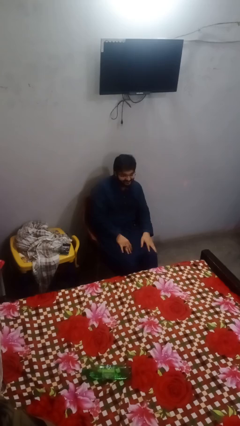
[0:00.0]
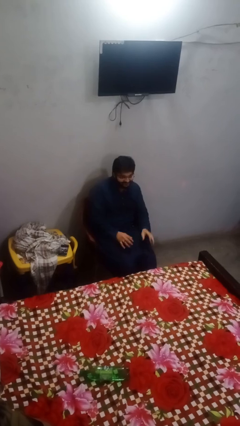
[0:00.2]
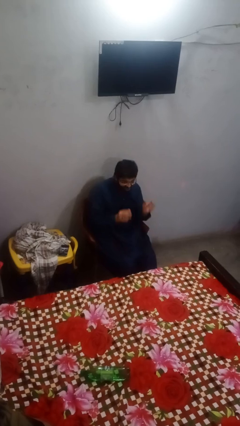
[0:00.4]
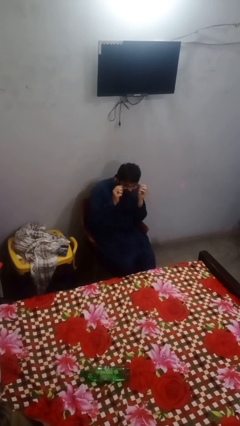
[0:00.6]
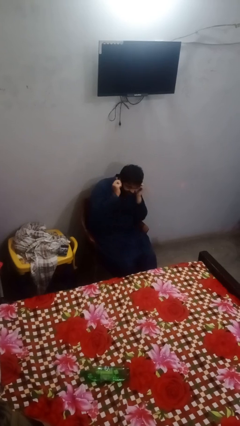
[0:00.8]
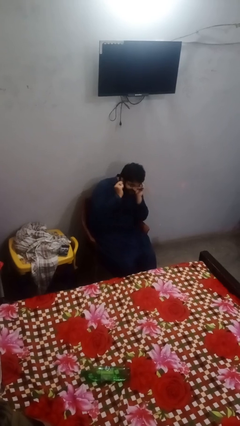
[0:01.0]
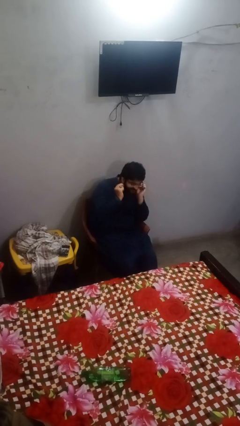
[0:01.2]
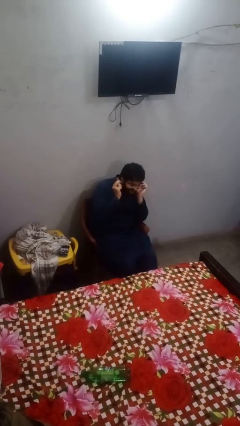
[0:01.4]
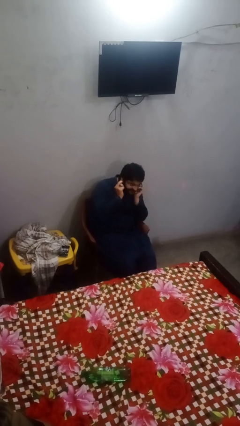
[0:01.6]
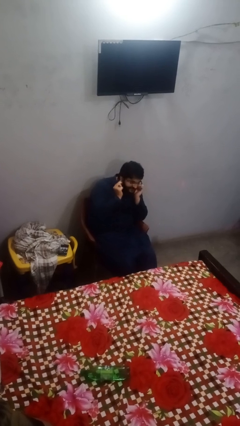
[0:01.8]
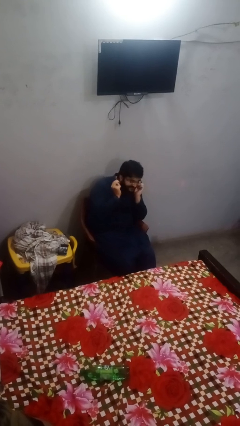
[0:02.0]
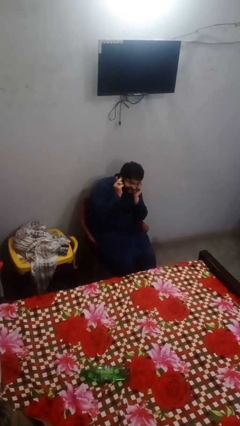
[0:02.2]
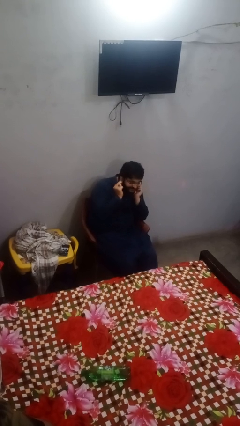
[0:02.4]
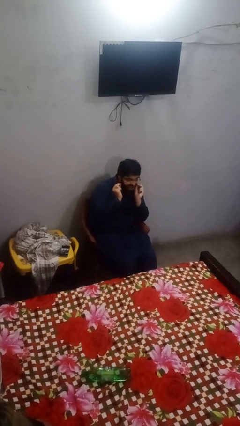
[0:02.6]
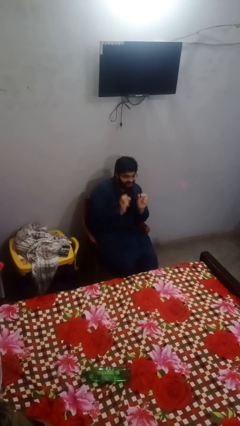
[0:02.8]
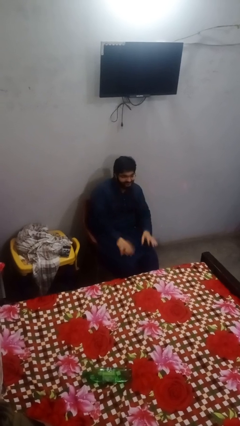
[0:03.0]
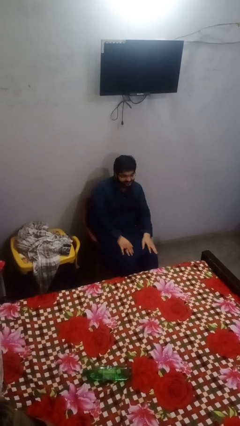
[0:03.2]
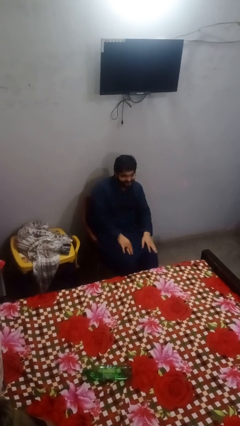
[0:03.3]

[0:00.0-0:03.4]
person touches earlobe

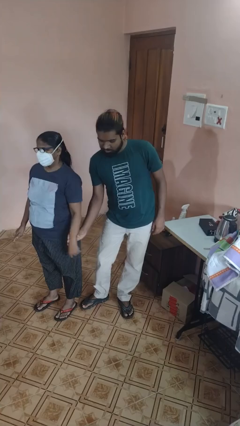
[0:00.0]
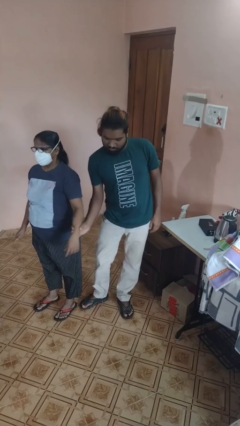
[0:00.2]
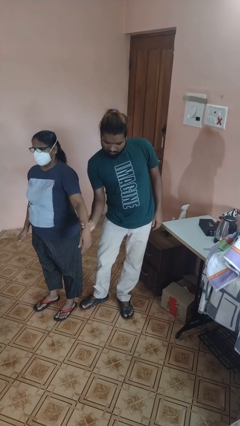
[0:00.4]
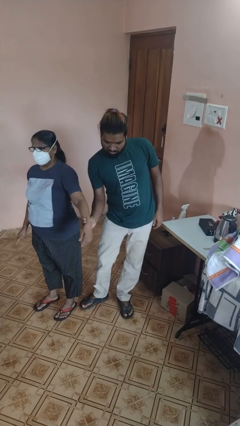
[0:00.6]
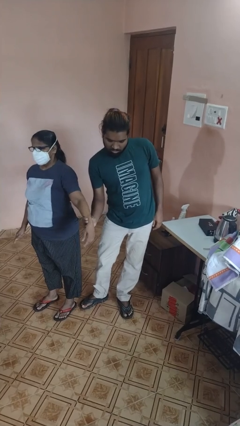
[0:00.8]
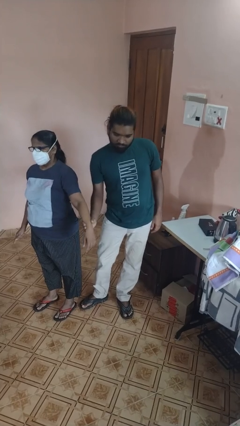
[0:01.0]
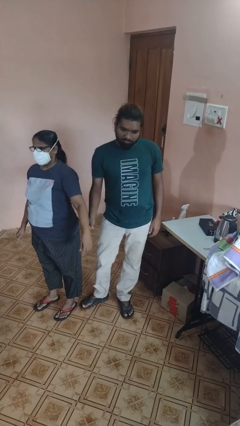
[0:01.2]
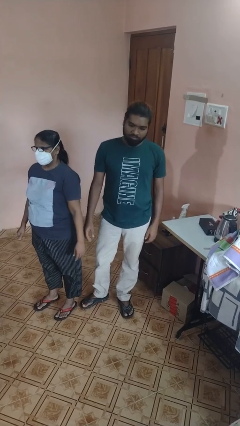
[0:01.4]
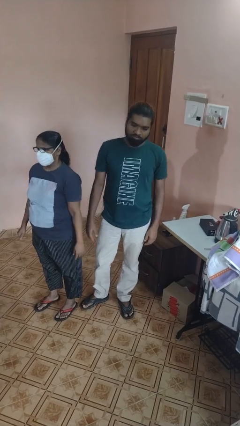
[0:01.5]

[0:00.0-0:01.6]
person grabs person by forearm

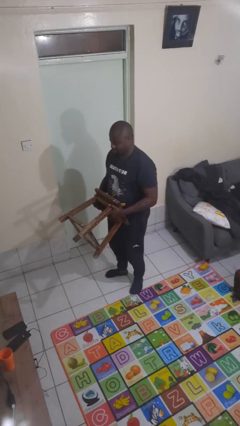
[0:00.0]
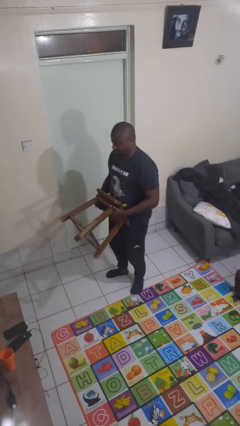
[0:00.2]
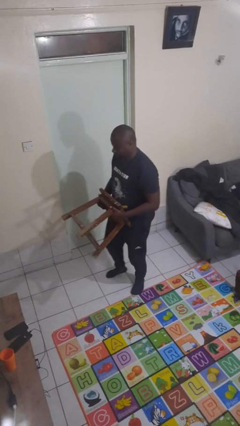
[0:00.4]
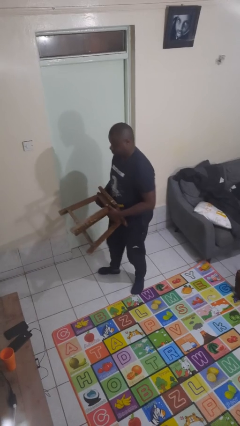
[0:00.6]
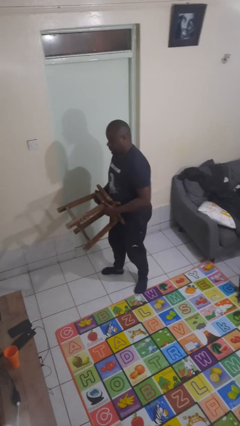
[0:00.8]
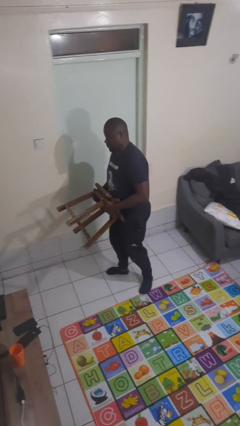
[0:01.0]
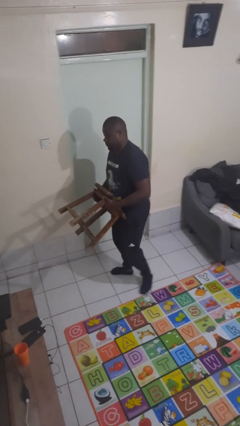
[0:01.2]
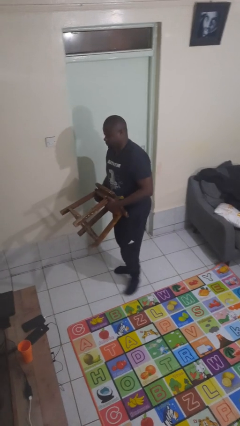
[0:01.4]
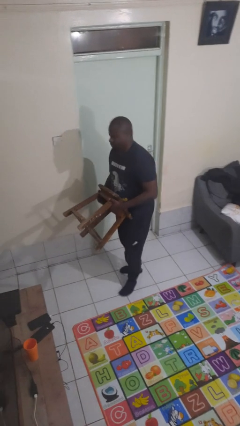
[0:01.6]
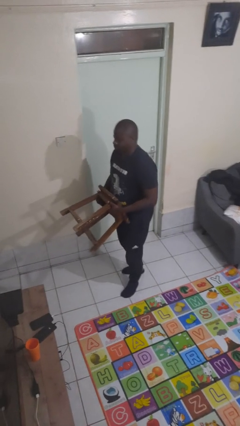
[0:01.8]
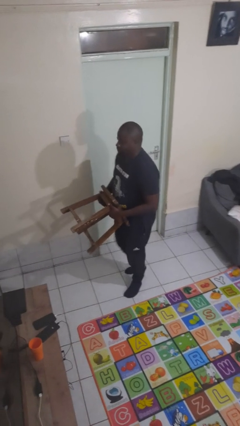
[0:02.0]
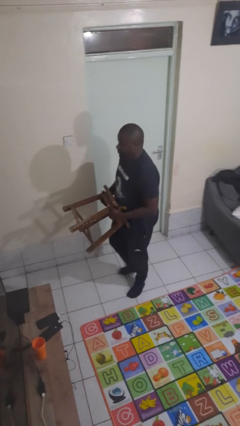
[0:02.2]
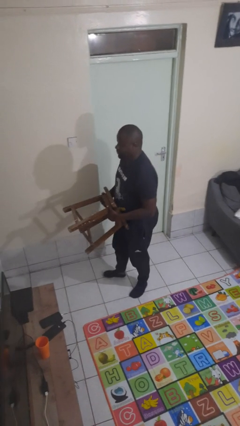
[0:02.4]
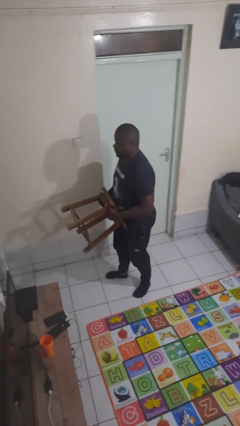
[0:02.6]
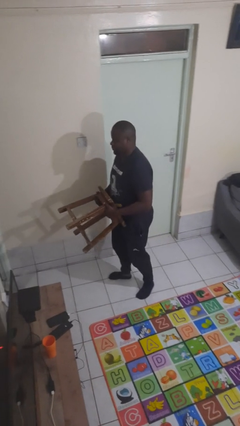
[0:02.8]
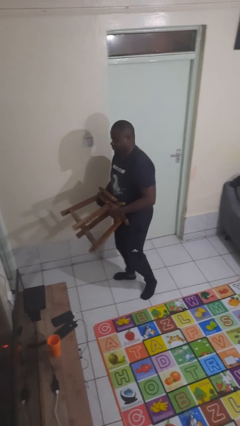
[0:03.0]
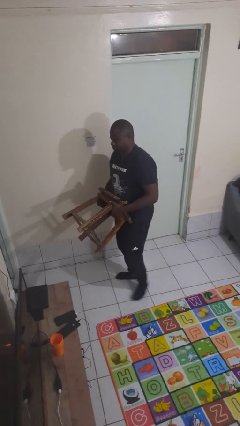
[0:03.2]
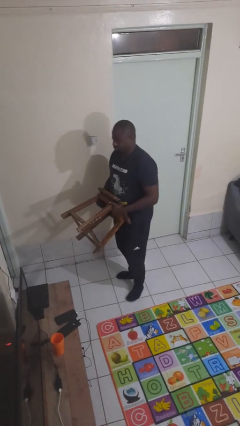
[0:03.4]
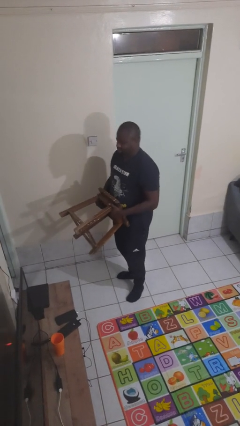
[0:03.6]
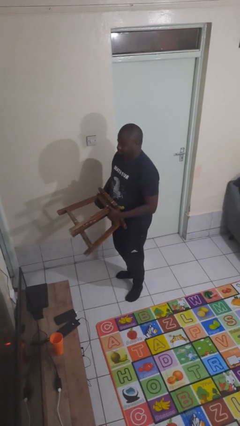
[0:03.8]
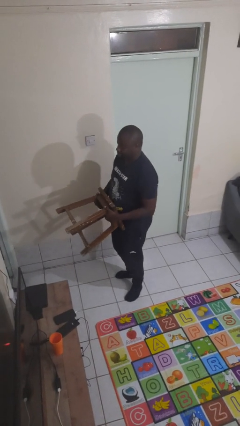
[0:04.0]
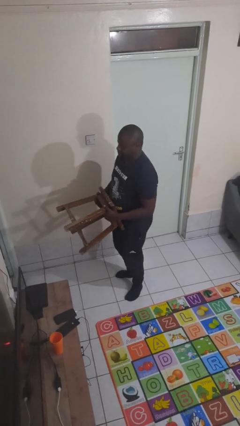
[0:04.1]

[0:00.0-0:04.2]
person carries furniture

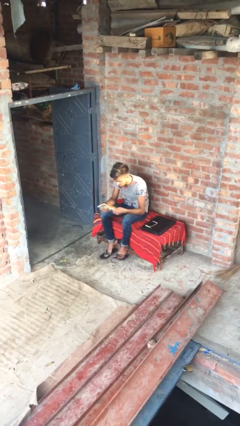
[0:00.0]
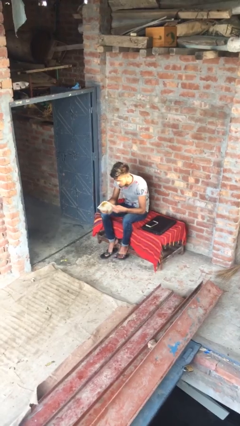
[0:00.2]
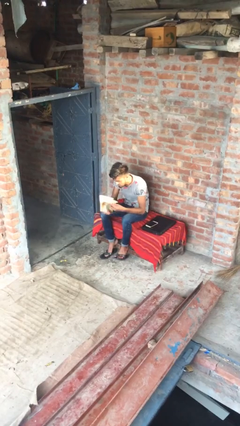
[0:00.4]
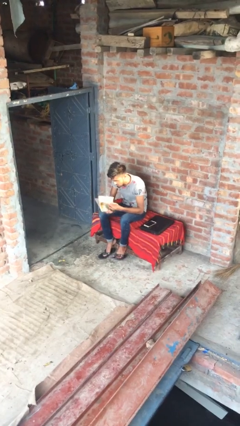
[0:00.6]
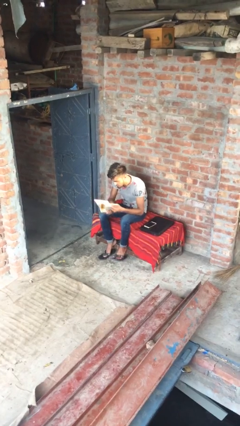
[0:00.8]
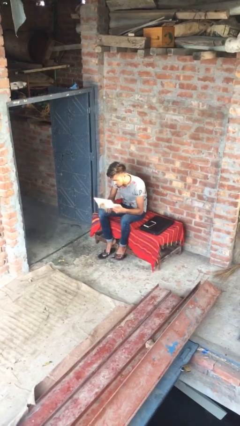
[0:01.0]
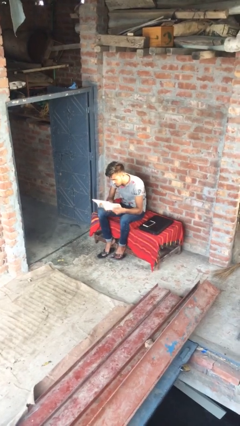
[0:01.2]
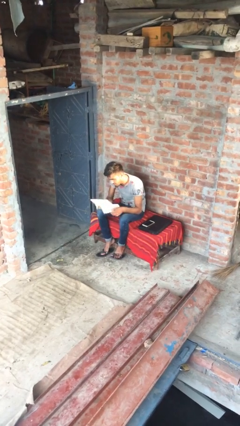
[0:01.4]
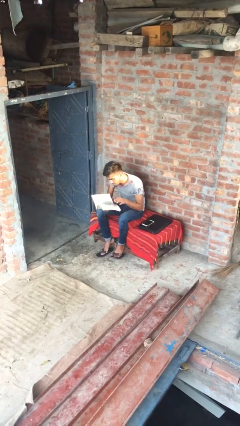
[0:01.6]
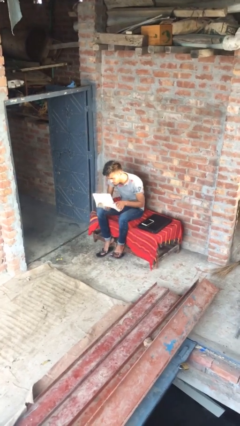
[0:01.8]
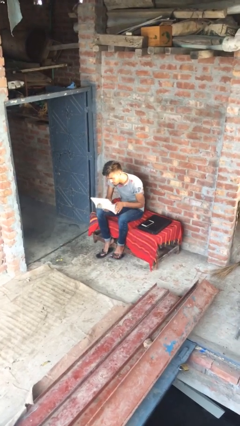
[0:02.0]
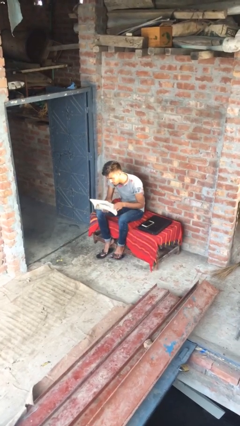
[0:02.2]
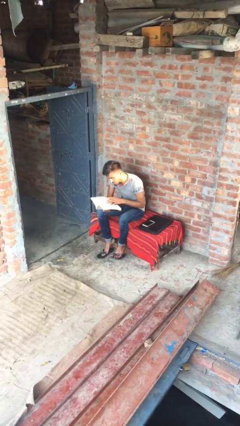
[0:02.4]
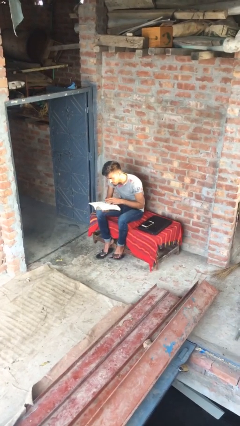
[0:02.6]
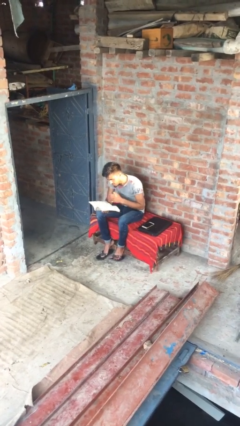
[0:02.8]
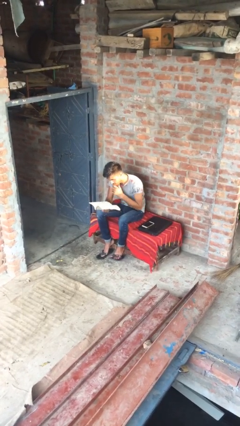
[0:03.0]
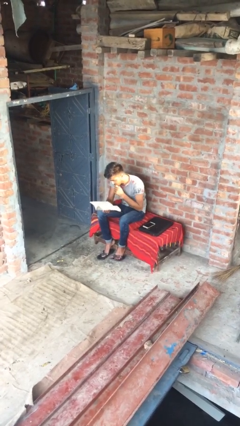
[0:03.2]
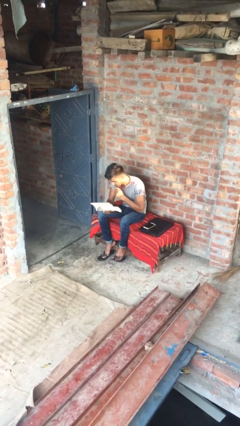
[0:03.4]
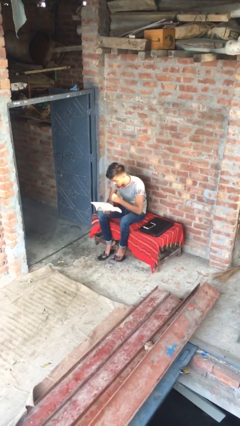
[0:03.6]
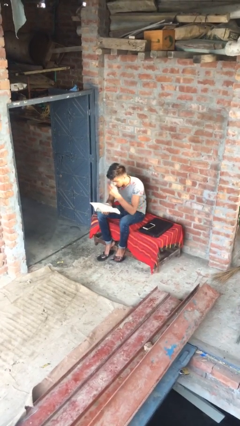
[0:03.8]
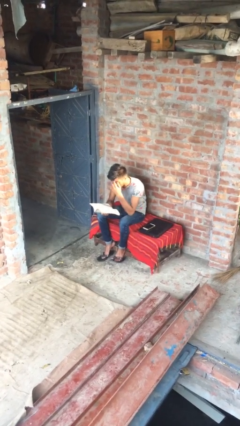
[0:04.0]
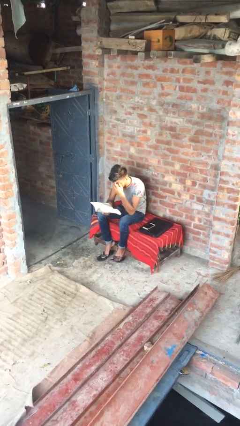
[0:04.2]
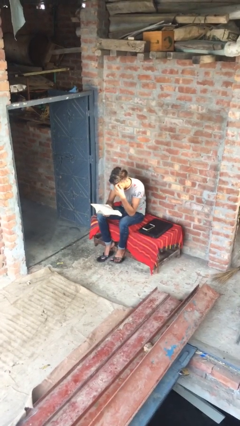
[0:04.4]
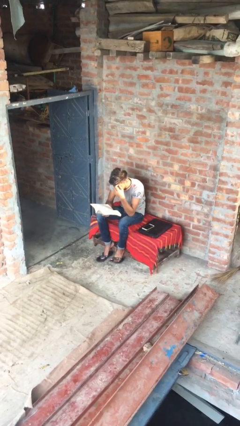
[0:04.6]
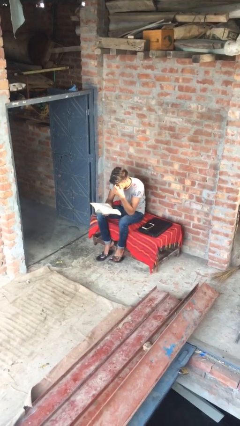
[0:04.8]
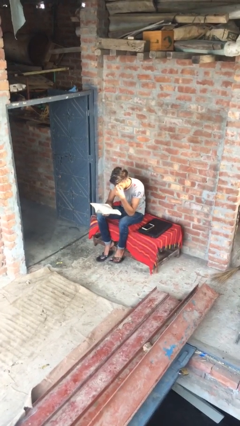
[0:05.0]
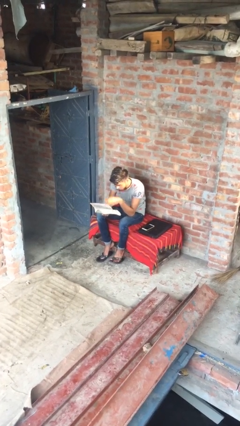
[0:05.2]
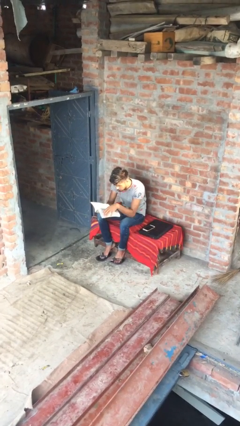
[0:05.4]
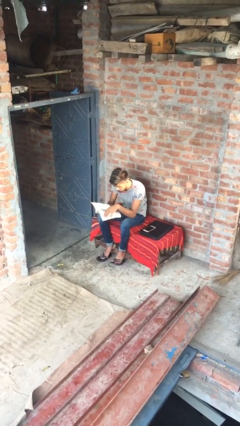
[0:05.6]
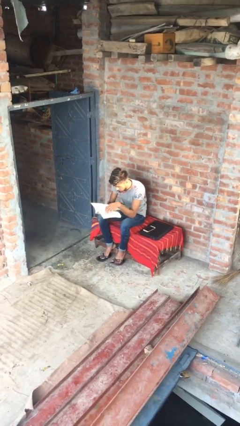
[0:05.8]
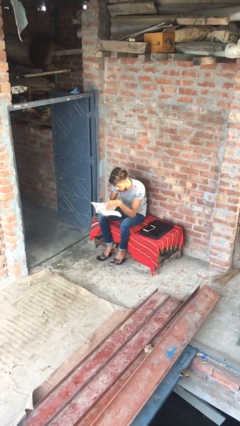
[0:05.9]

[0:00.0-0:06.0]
person reads document

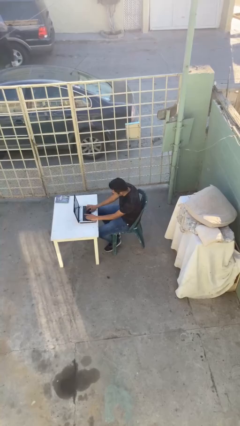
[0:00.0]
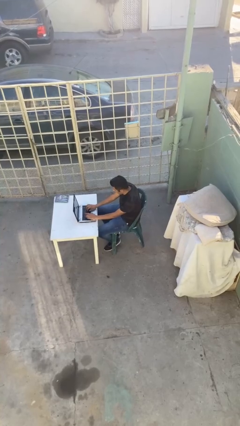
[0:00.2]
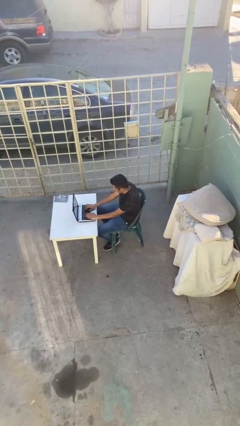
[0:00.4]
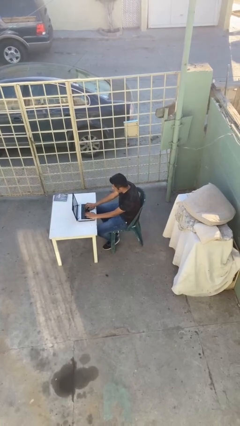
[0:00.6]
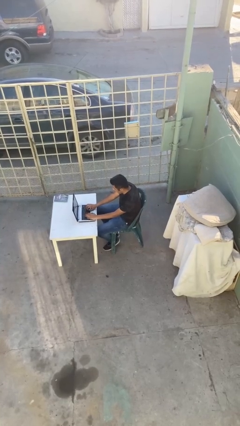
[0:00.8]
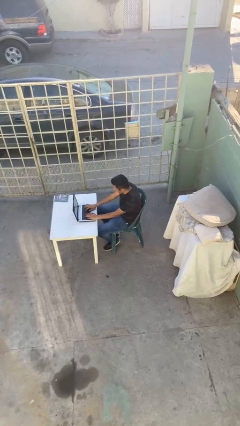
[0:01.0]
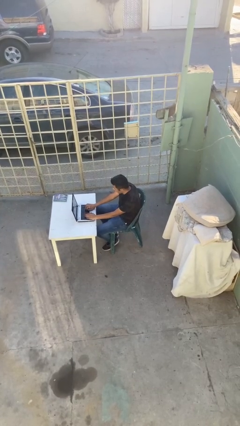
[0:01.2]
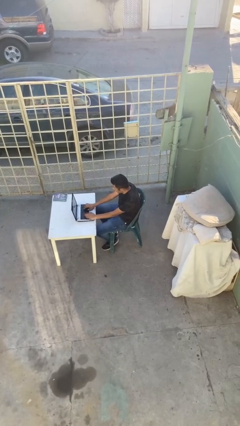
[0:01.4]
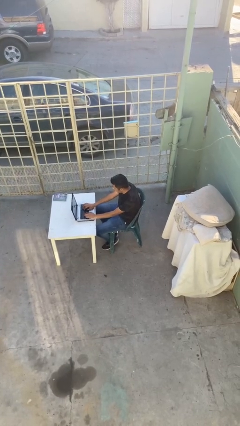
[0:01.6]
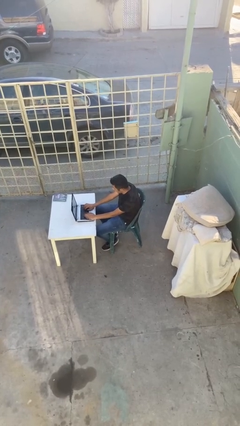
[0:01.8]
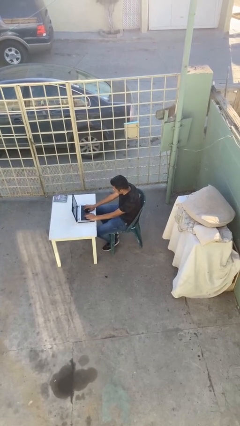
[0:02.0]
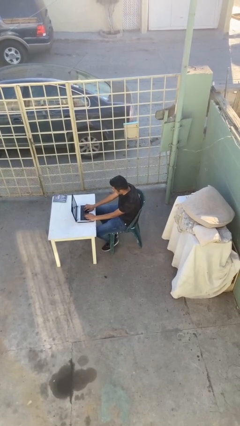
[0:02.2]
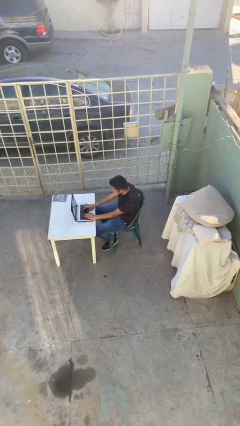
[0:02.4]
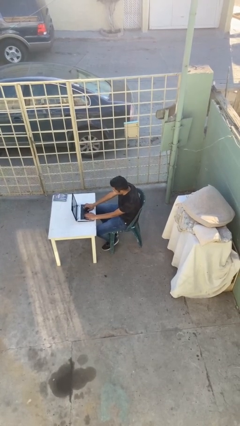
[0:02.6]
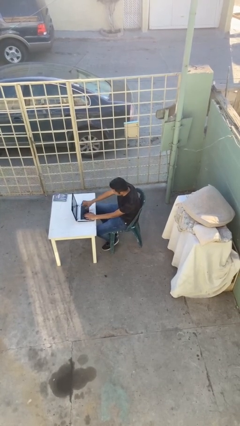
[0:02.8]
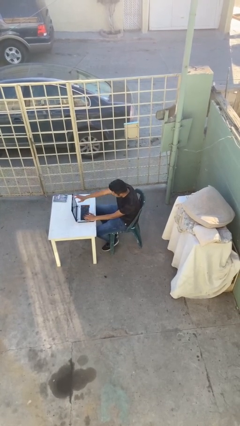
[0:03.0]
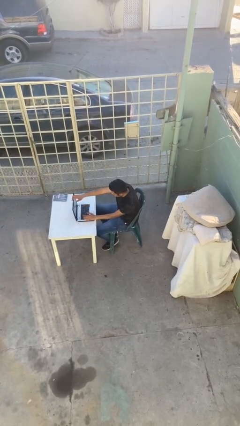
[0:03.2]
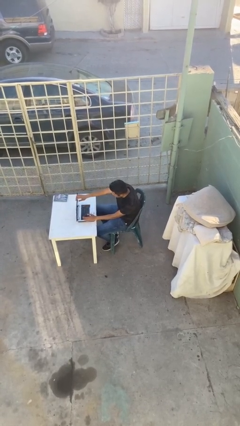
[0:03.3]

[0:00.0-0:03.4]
person interacts with laptop
